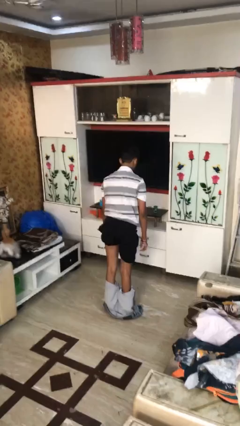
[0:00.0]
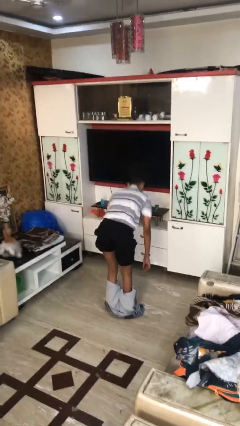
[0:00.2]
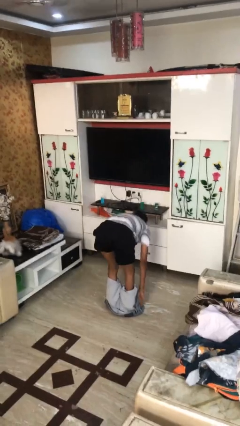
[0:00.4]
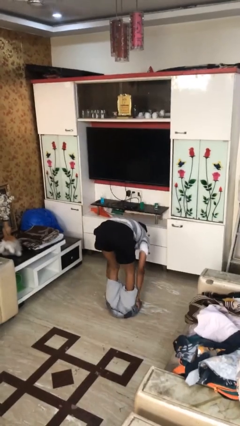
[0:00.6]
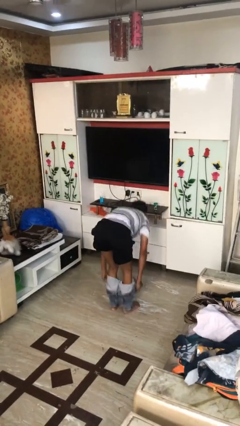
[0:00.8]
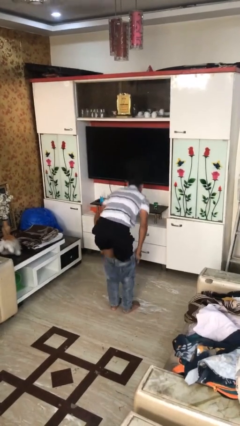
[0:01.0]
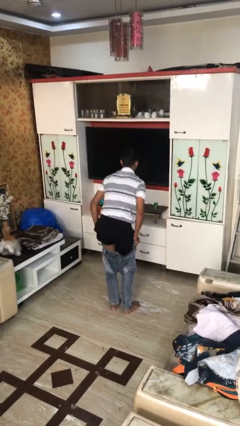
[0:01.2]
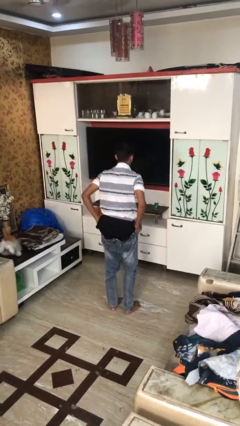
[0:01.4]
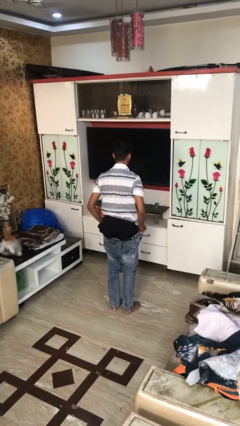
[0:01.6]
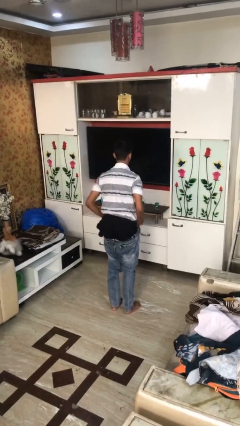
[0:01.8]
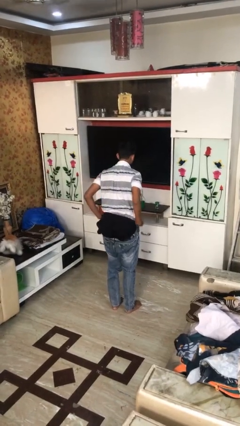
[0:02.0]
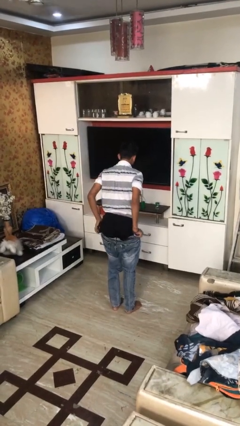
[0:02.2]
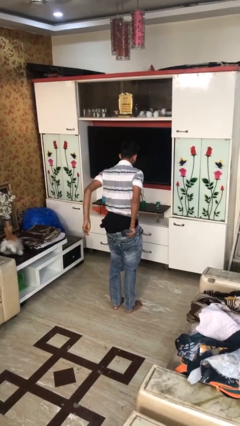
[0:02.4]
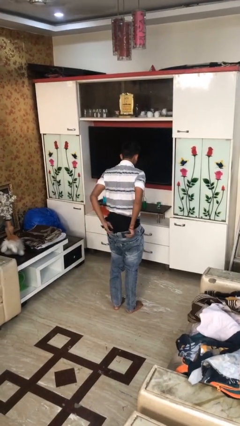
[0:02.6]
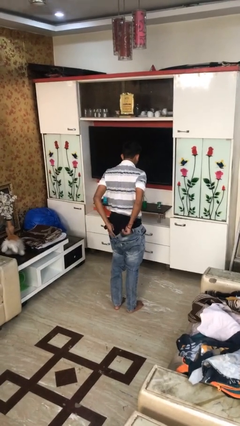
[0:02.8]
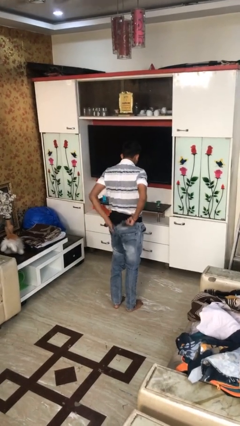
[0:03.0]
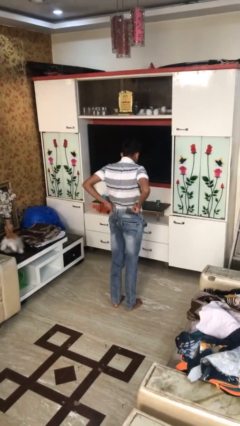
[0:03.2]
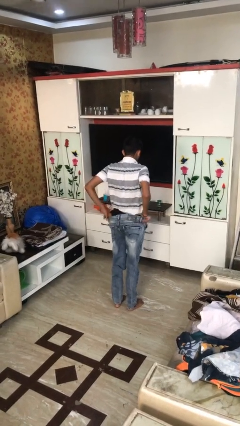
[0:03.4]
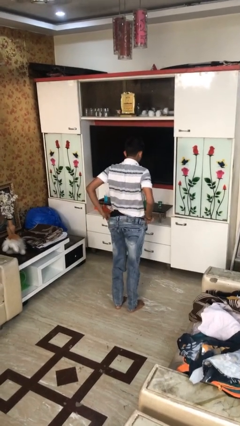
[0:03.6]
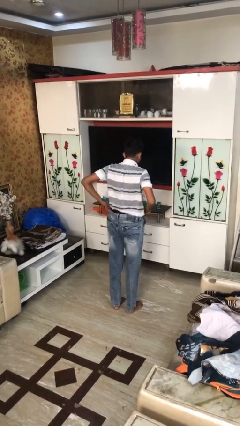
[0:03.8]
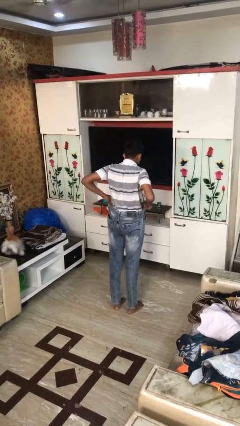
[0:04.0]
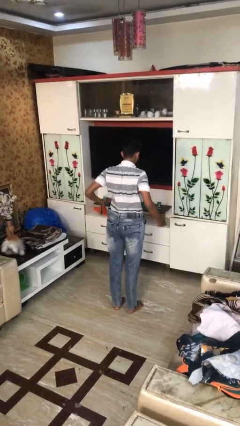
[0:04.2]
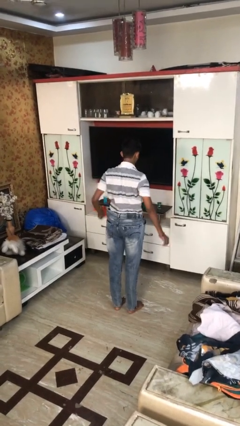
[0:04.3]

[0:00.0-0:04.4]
person puts on pants

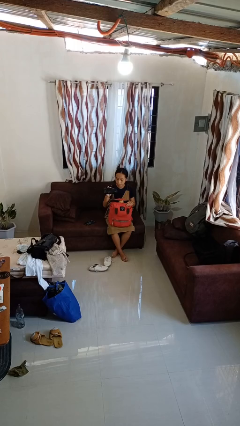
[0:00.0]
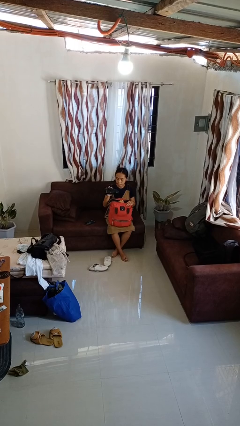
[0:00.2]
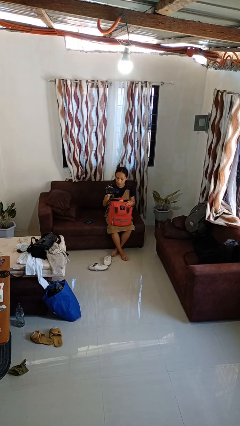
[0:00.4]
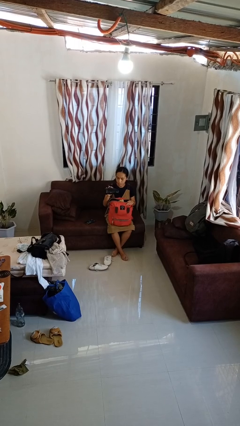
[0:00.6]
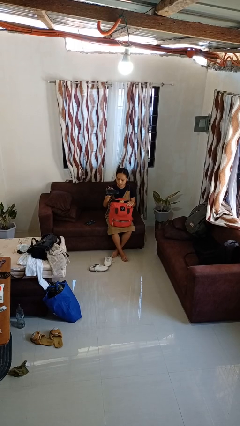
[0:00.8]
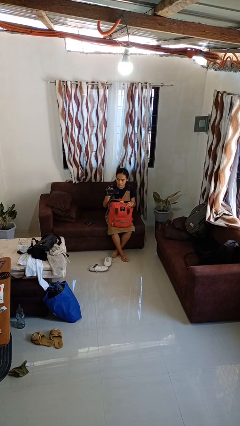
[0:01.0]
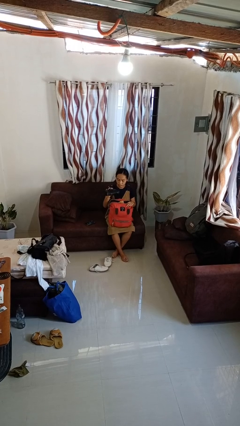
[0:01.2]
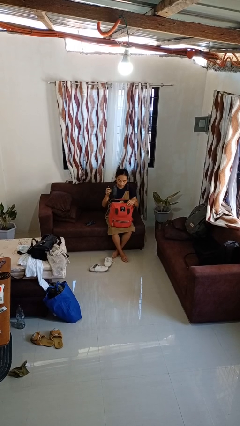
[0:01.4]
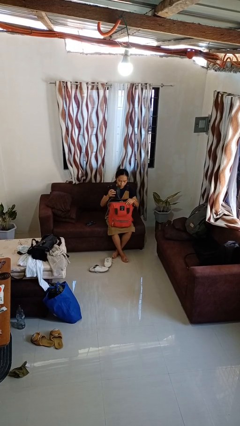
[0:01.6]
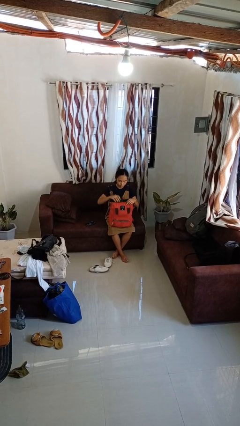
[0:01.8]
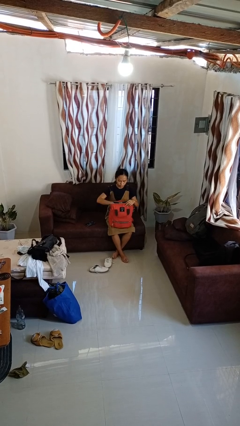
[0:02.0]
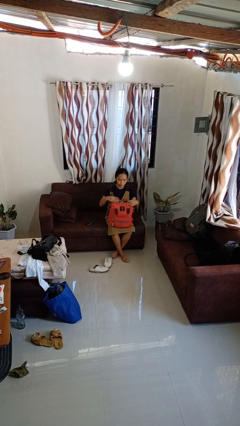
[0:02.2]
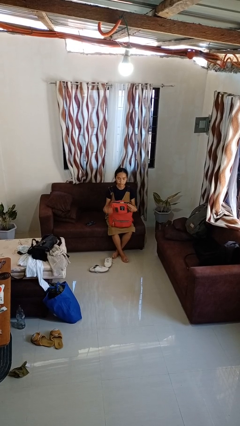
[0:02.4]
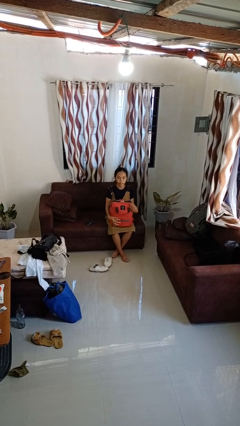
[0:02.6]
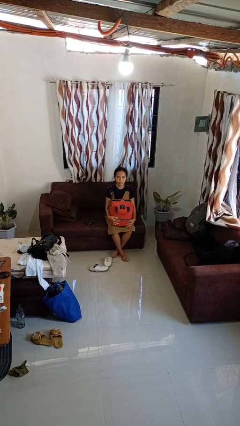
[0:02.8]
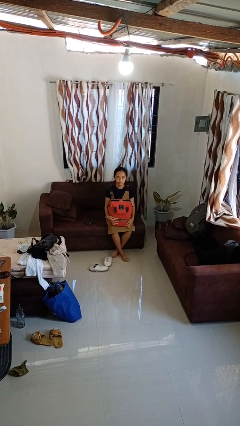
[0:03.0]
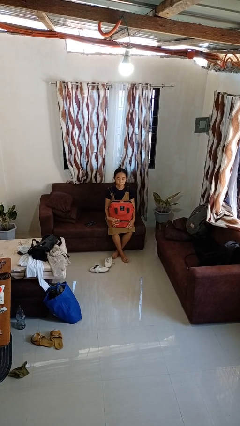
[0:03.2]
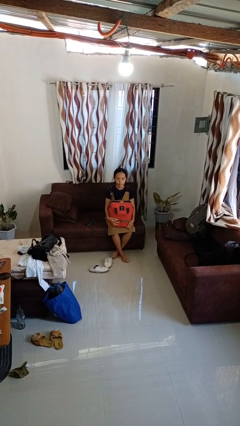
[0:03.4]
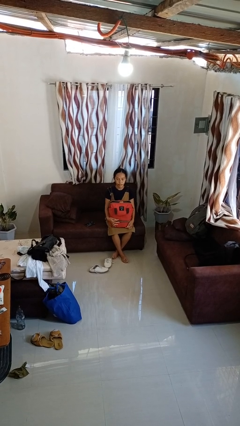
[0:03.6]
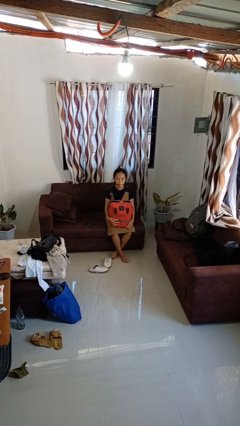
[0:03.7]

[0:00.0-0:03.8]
person puts object into backpack

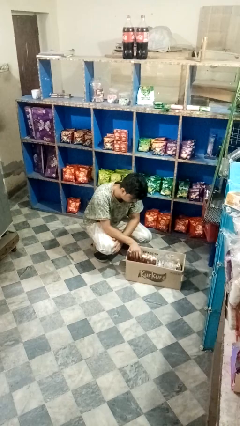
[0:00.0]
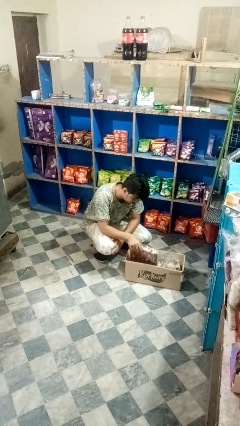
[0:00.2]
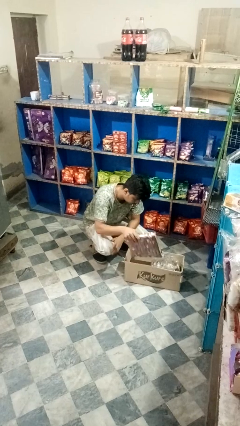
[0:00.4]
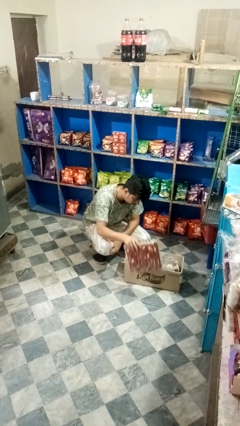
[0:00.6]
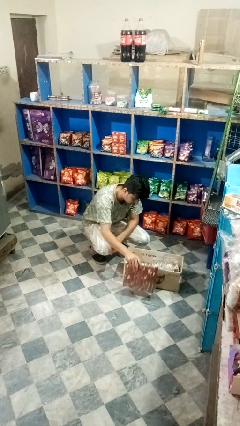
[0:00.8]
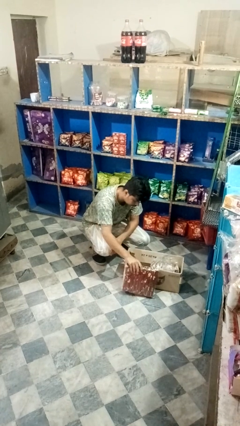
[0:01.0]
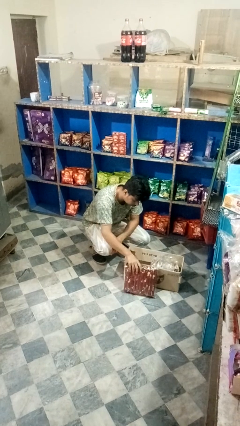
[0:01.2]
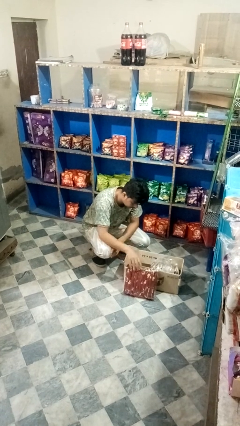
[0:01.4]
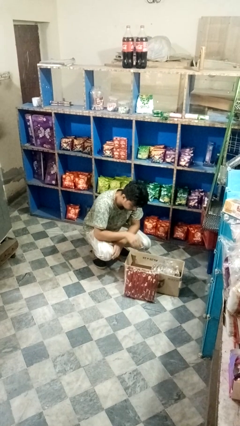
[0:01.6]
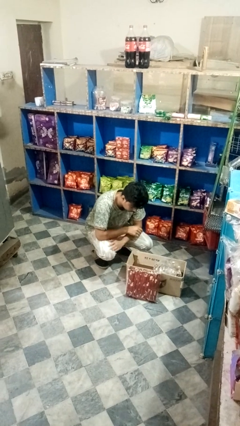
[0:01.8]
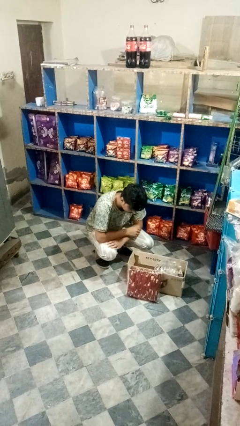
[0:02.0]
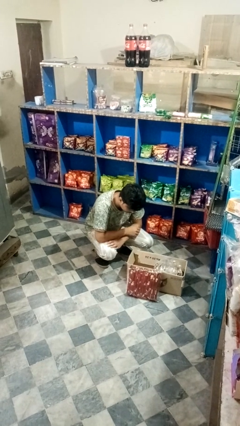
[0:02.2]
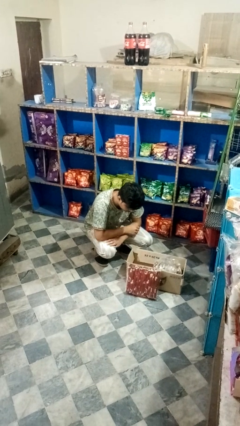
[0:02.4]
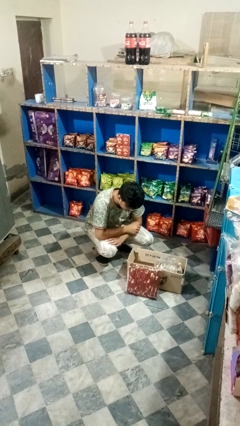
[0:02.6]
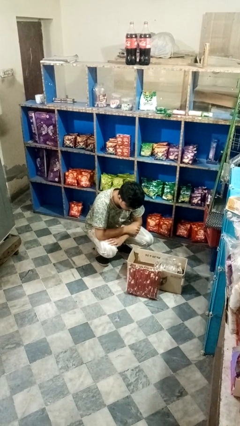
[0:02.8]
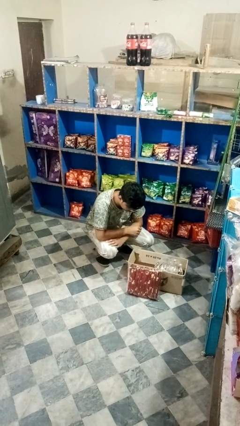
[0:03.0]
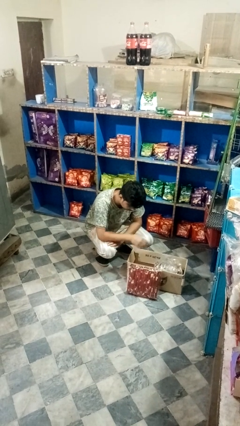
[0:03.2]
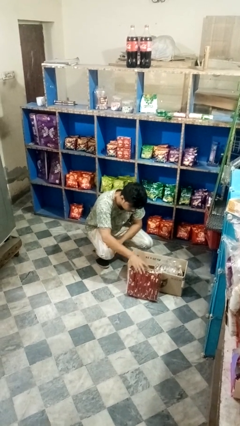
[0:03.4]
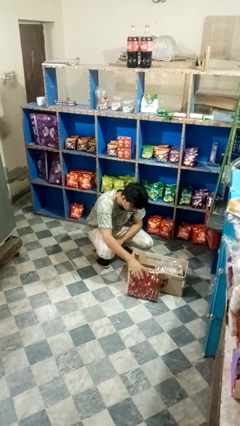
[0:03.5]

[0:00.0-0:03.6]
person takes object from box

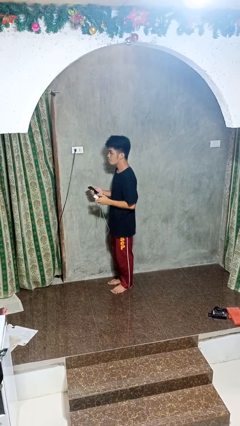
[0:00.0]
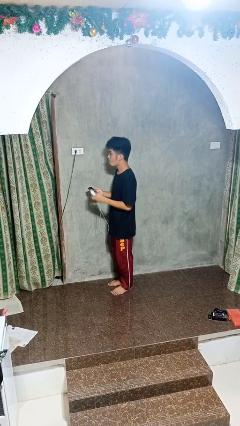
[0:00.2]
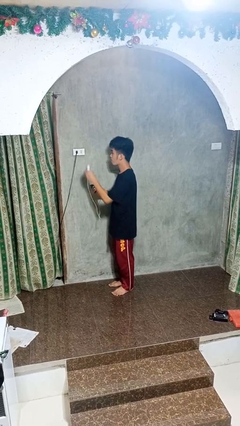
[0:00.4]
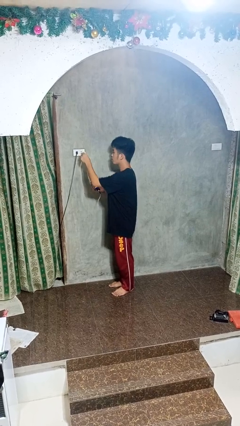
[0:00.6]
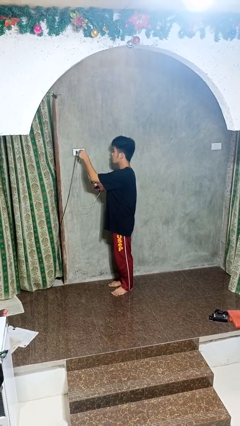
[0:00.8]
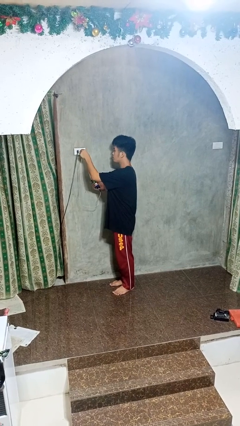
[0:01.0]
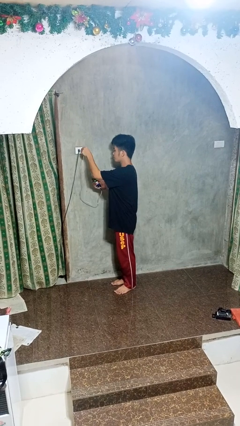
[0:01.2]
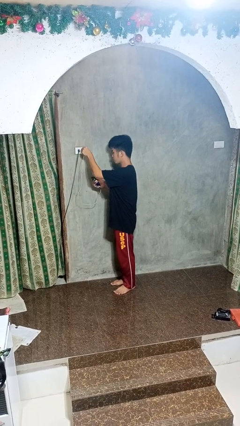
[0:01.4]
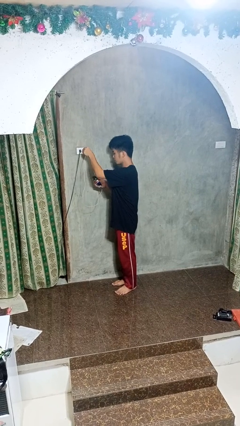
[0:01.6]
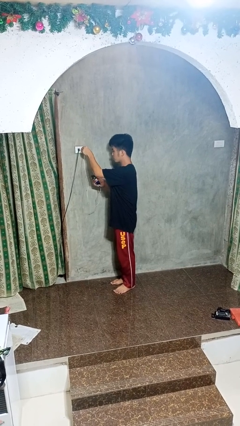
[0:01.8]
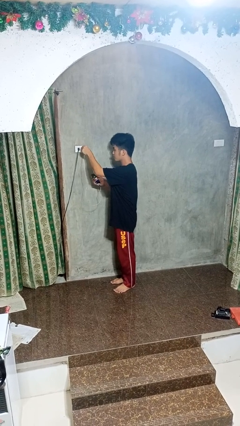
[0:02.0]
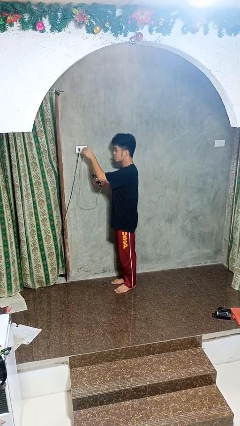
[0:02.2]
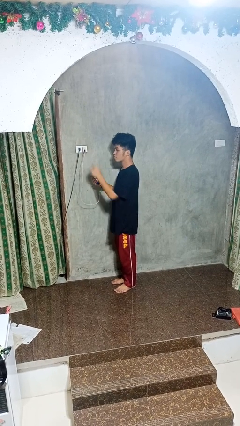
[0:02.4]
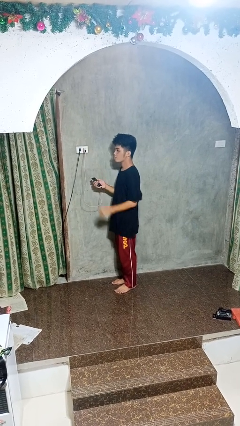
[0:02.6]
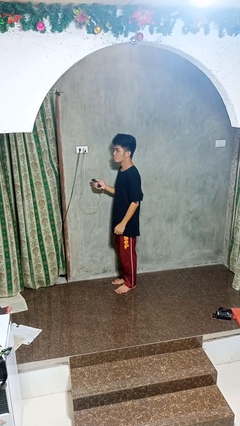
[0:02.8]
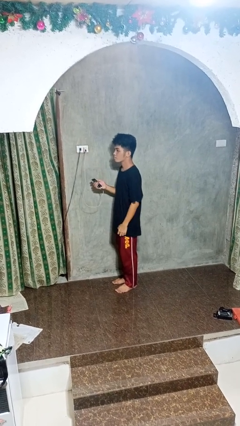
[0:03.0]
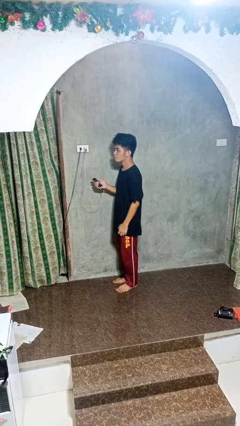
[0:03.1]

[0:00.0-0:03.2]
person plugs into electrical socket

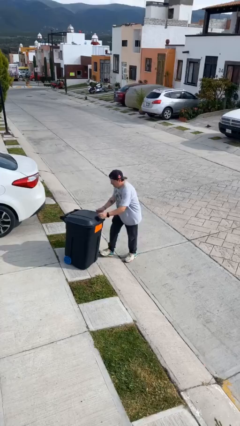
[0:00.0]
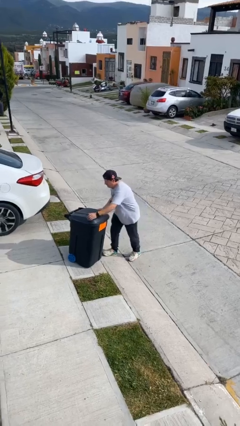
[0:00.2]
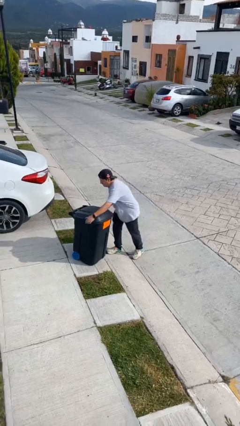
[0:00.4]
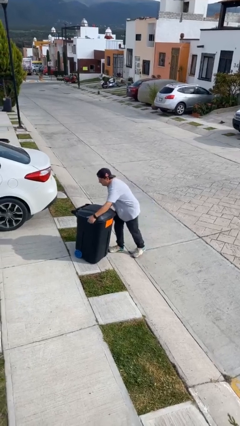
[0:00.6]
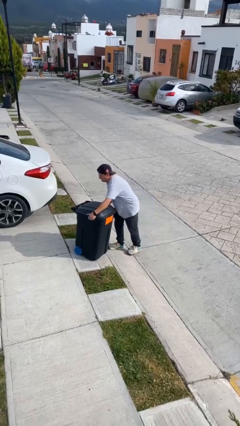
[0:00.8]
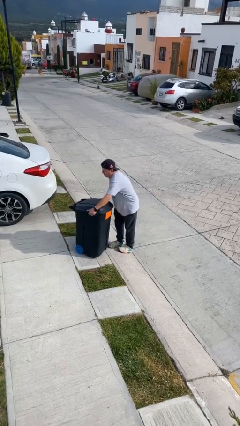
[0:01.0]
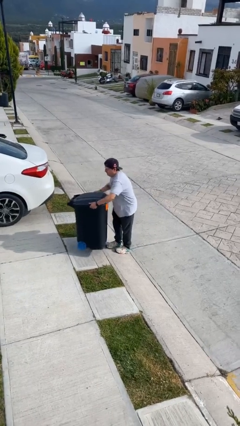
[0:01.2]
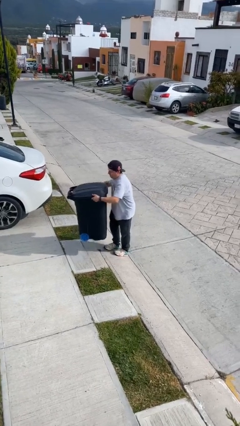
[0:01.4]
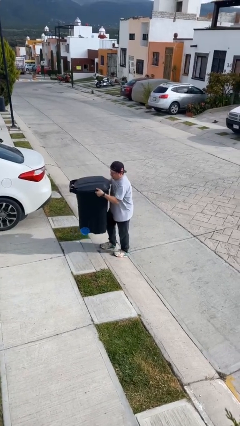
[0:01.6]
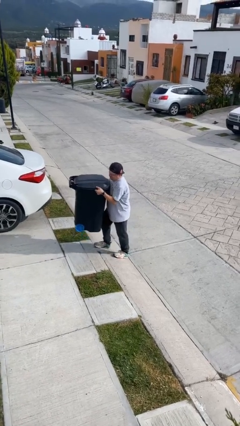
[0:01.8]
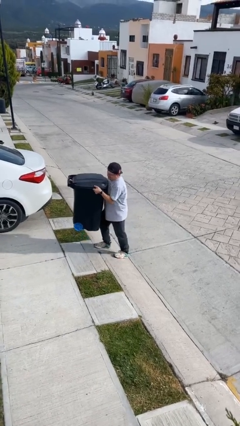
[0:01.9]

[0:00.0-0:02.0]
person picks up object from floor

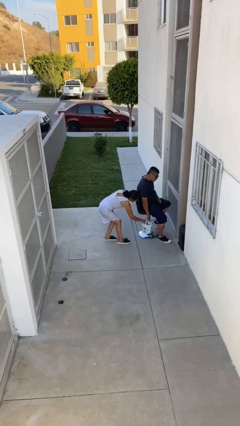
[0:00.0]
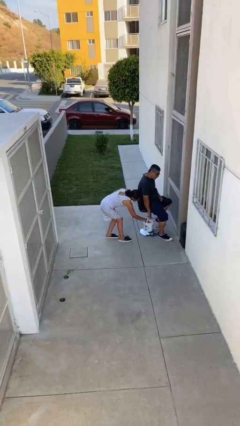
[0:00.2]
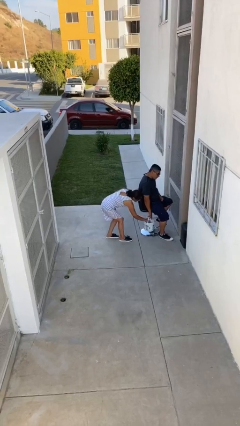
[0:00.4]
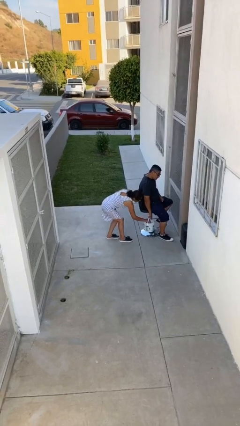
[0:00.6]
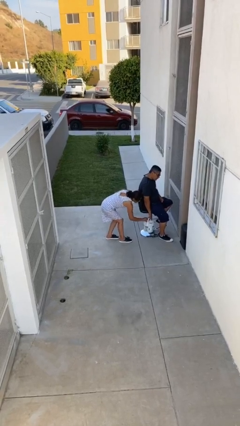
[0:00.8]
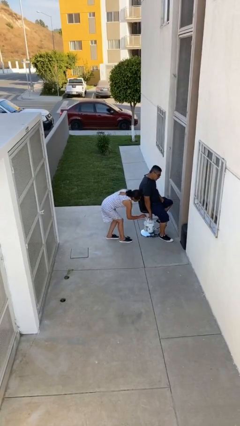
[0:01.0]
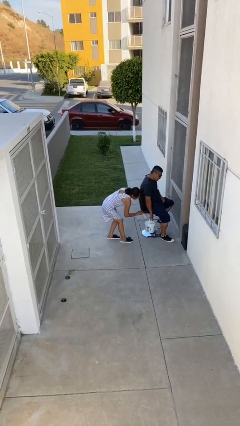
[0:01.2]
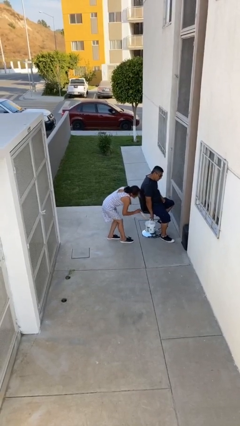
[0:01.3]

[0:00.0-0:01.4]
person steals object from person
